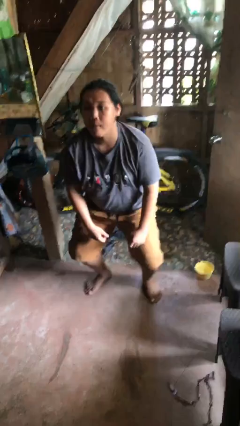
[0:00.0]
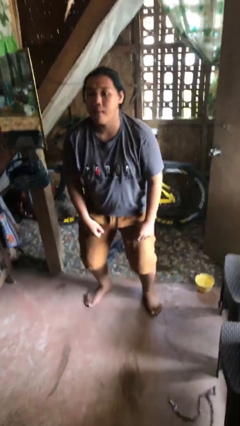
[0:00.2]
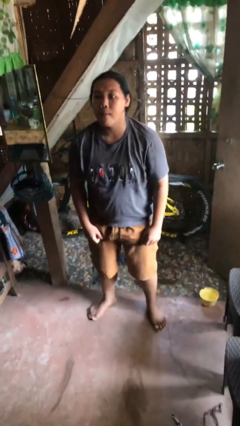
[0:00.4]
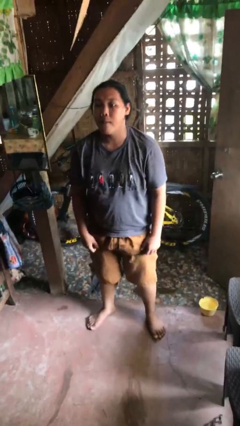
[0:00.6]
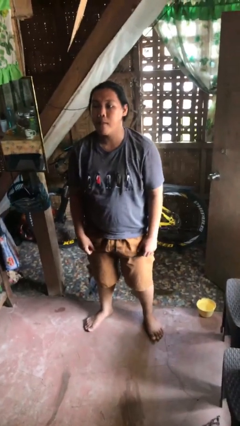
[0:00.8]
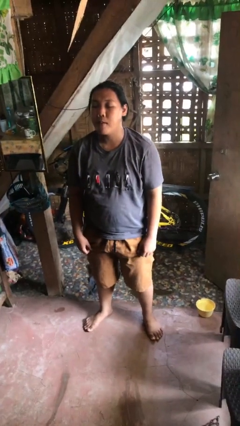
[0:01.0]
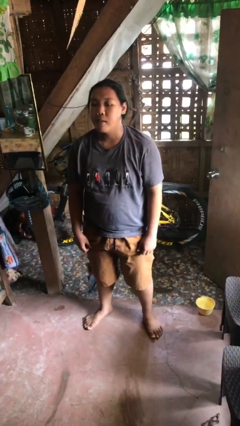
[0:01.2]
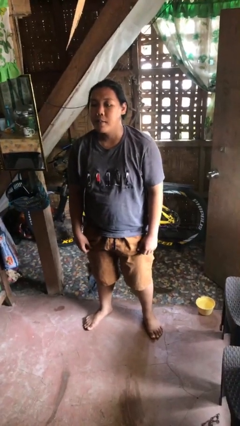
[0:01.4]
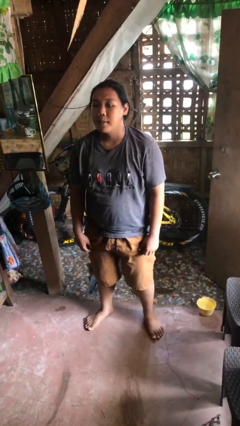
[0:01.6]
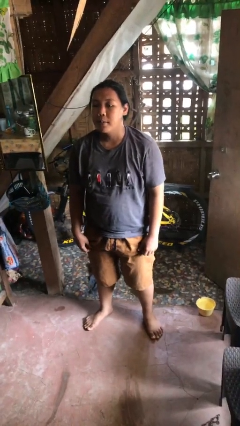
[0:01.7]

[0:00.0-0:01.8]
person stands up

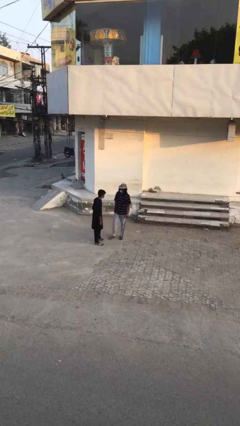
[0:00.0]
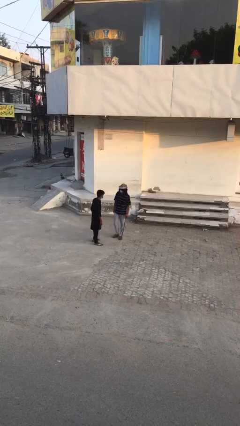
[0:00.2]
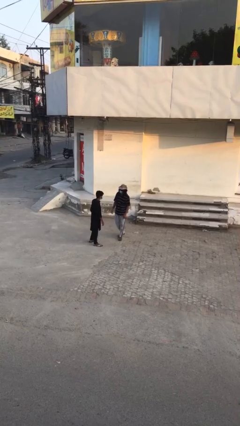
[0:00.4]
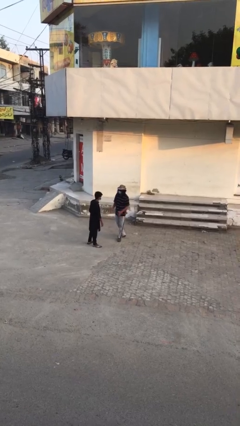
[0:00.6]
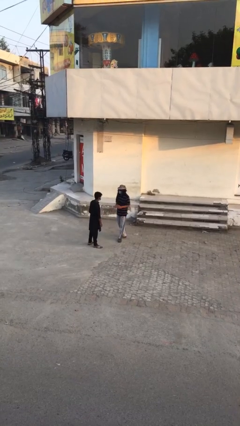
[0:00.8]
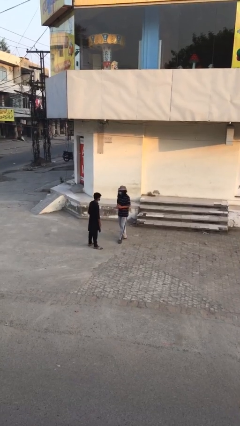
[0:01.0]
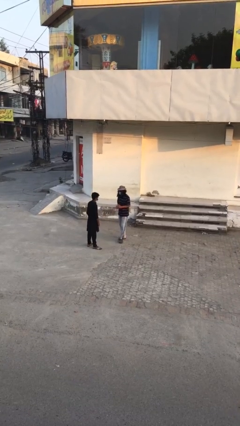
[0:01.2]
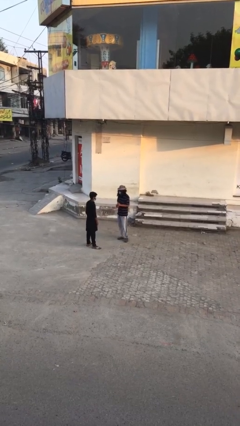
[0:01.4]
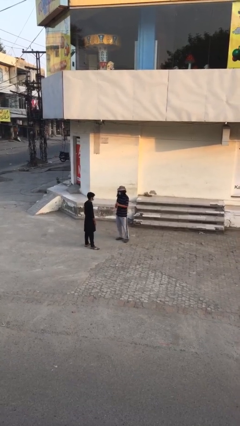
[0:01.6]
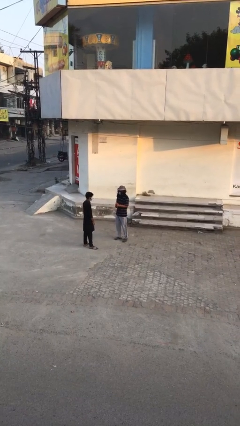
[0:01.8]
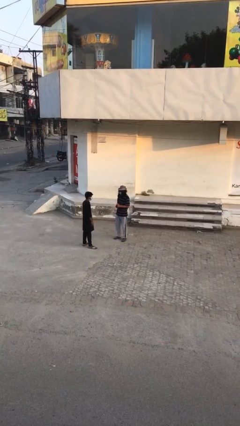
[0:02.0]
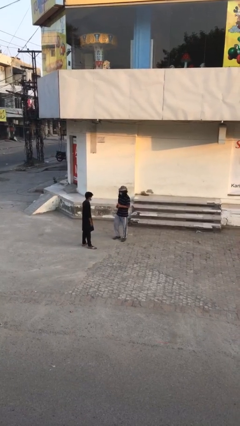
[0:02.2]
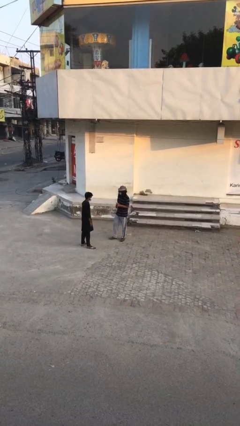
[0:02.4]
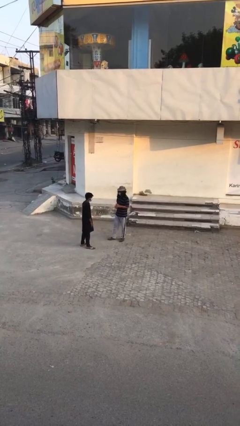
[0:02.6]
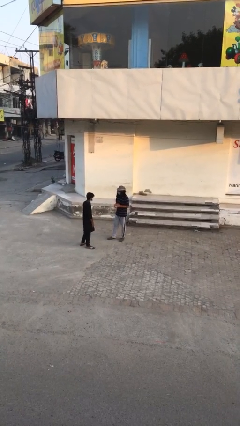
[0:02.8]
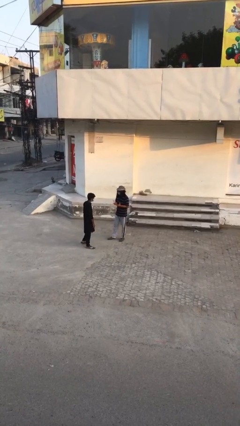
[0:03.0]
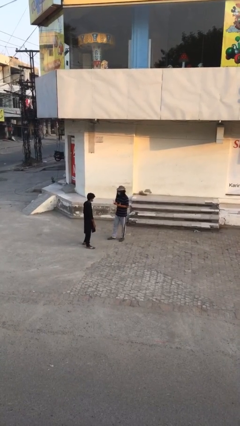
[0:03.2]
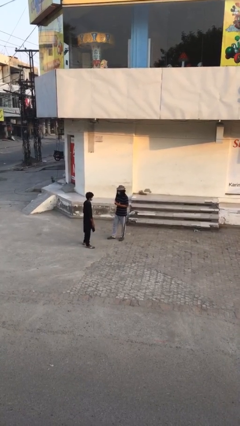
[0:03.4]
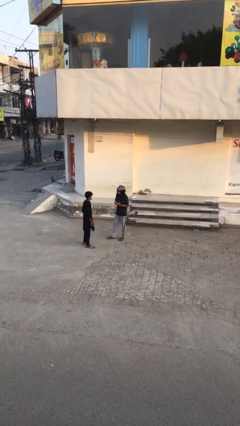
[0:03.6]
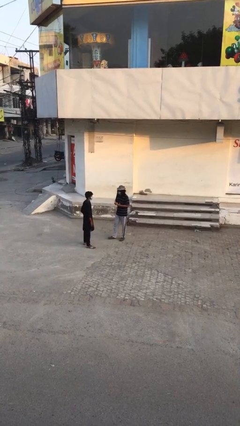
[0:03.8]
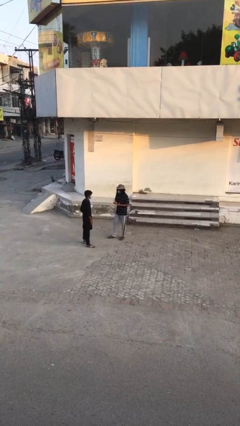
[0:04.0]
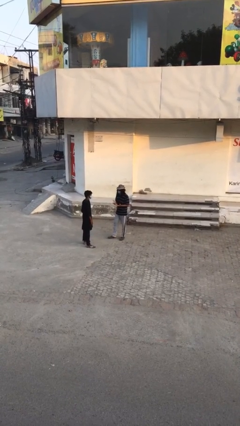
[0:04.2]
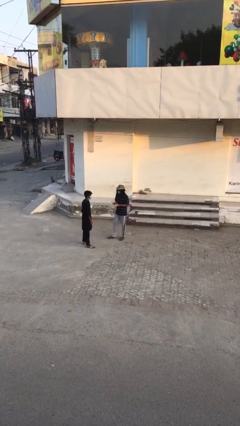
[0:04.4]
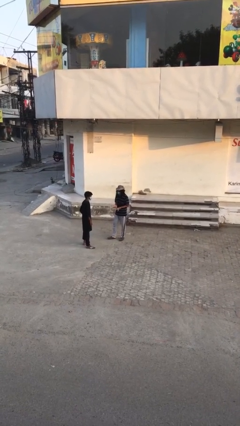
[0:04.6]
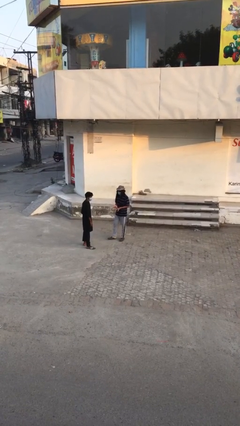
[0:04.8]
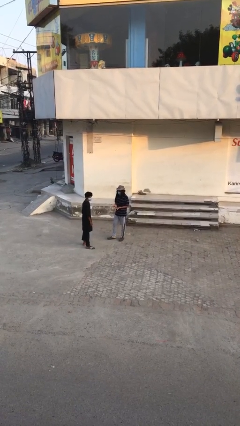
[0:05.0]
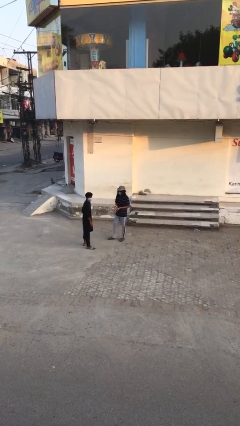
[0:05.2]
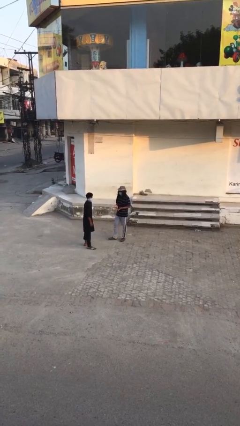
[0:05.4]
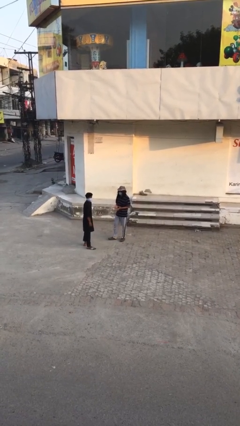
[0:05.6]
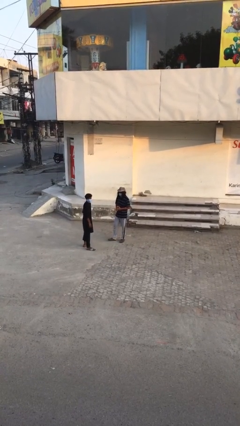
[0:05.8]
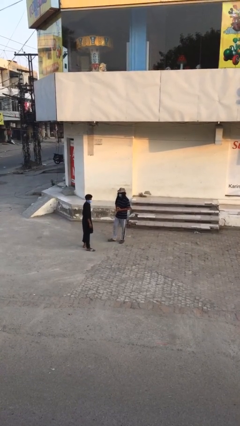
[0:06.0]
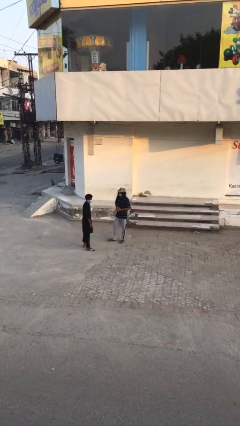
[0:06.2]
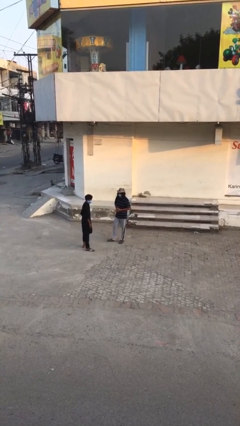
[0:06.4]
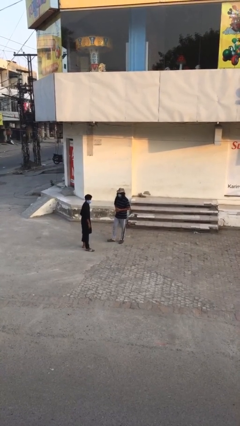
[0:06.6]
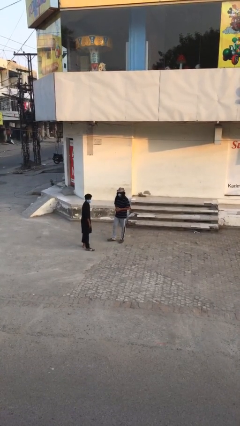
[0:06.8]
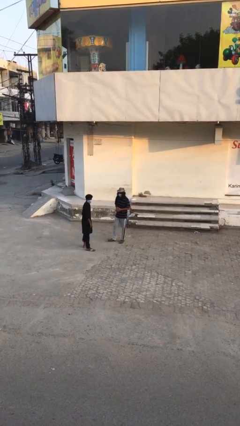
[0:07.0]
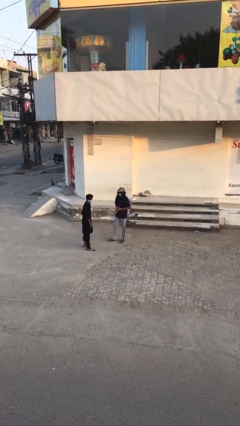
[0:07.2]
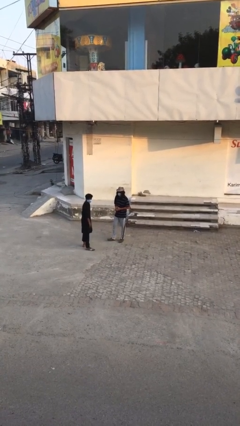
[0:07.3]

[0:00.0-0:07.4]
person talks to person

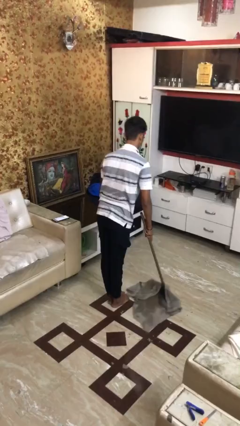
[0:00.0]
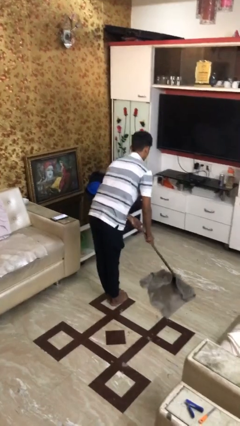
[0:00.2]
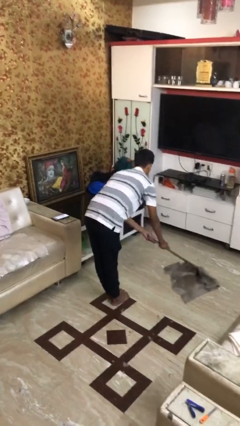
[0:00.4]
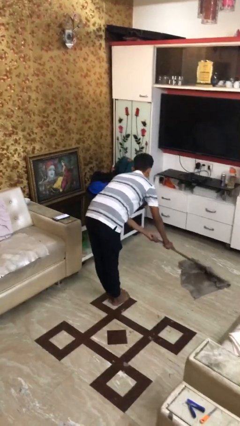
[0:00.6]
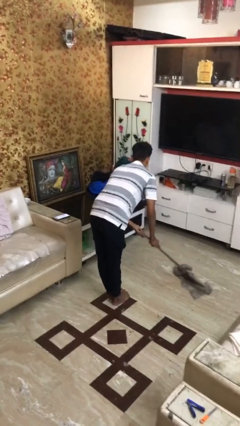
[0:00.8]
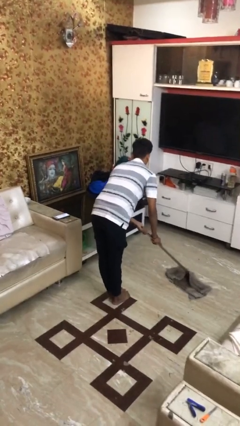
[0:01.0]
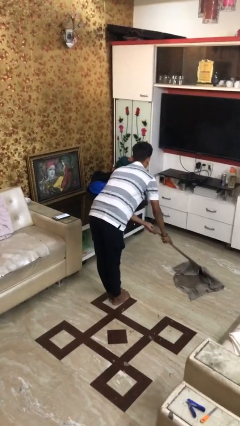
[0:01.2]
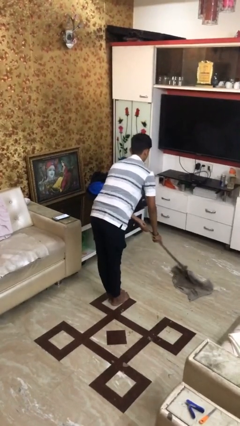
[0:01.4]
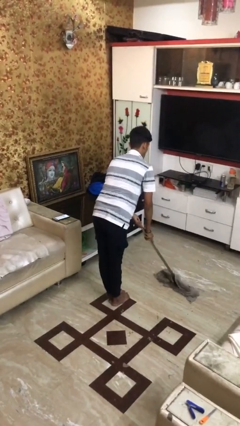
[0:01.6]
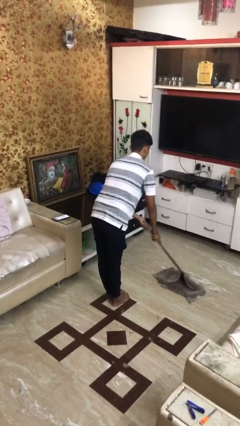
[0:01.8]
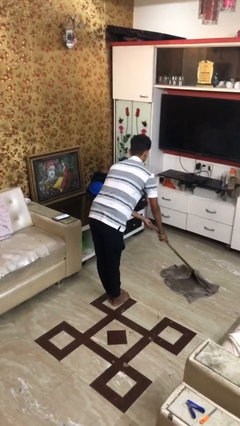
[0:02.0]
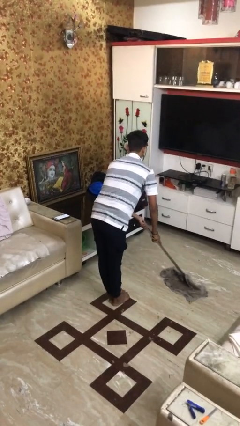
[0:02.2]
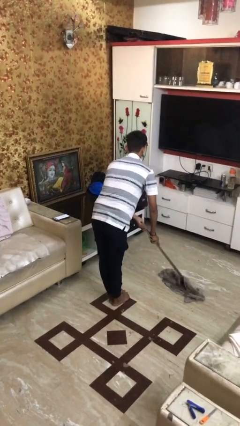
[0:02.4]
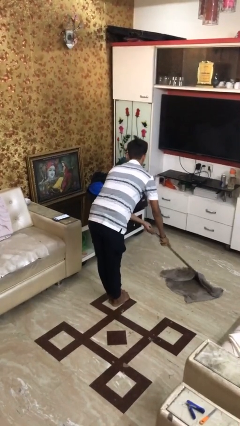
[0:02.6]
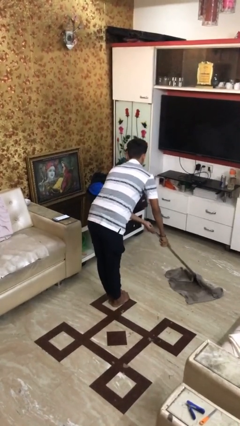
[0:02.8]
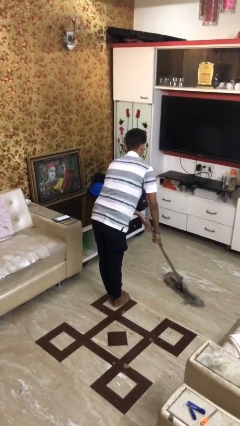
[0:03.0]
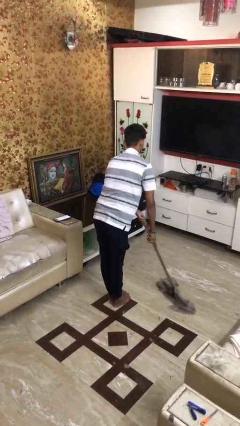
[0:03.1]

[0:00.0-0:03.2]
person mops

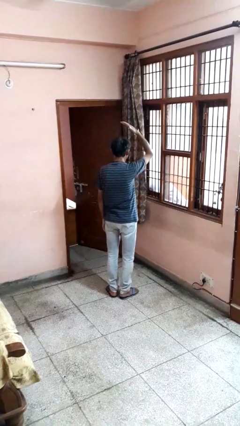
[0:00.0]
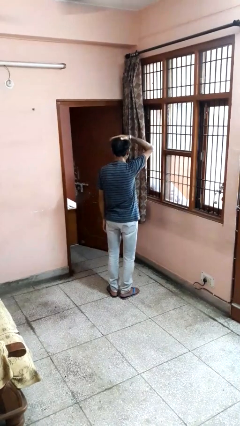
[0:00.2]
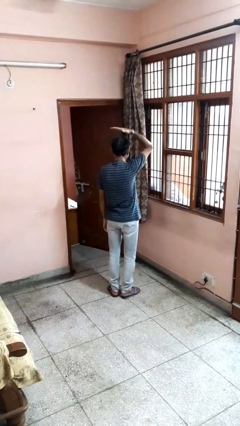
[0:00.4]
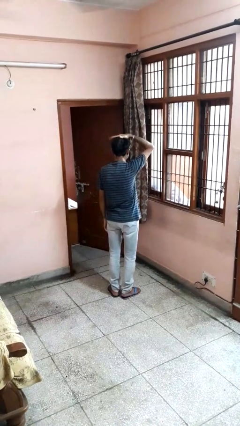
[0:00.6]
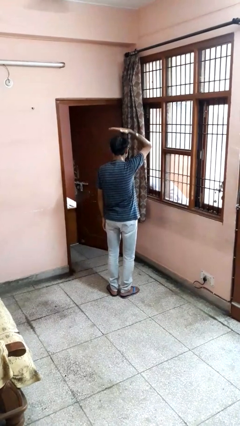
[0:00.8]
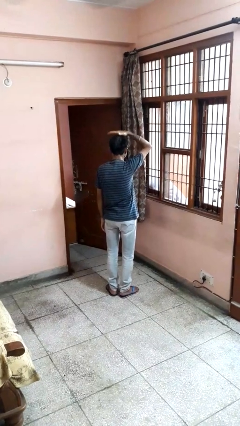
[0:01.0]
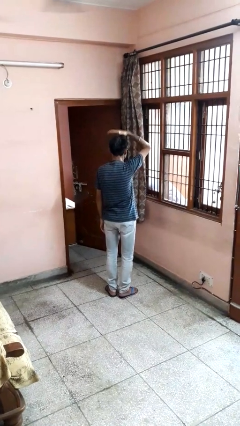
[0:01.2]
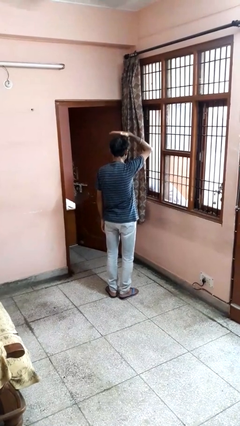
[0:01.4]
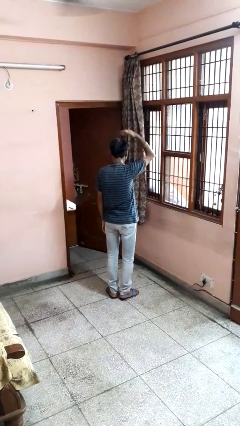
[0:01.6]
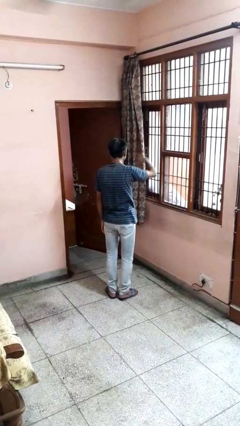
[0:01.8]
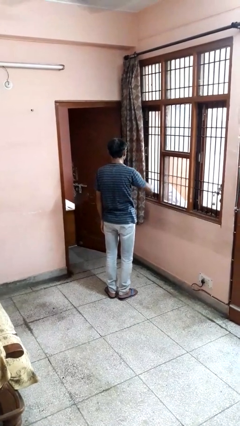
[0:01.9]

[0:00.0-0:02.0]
person pats head

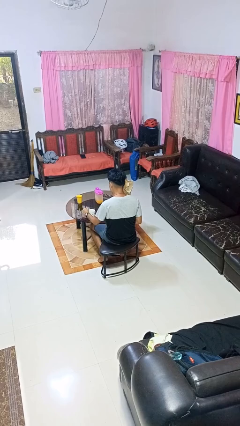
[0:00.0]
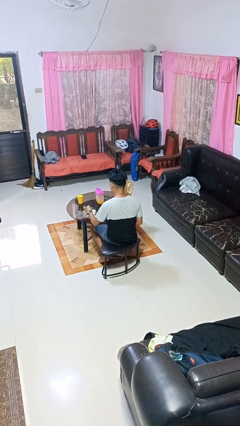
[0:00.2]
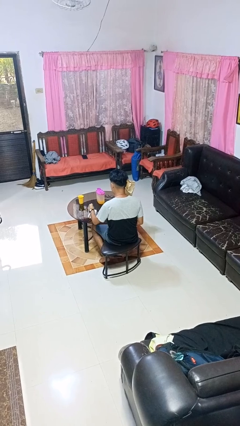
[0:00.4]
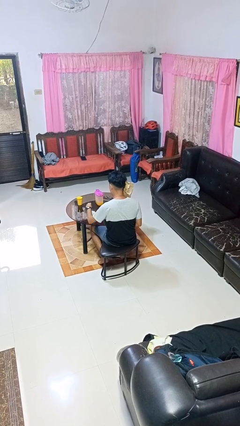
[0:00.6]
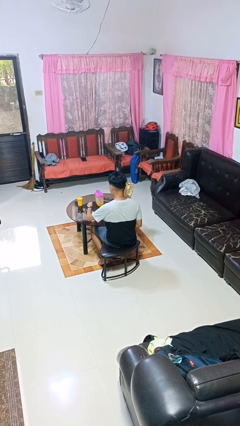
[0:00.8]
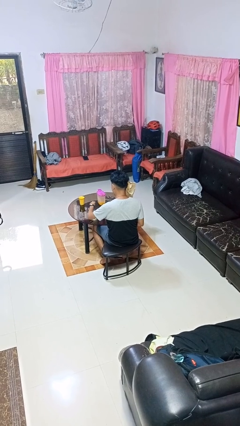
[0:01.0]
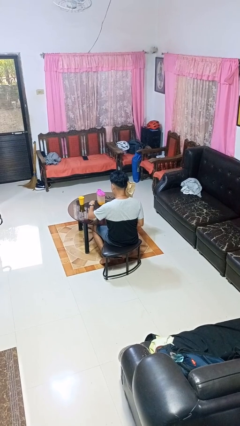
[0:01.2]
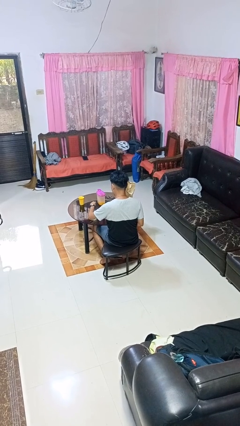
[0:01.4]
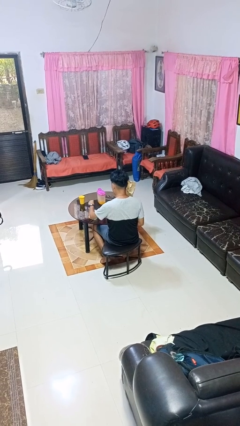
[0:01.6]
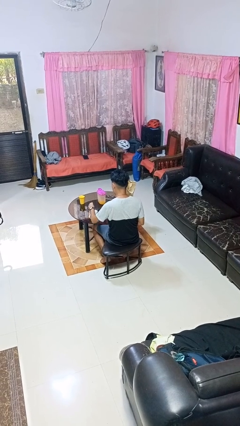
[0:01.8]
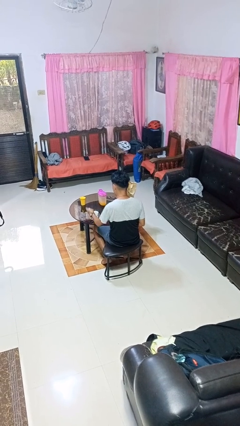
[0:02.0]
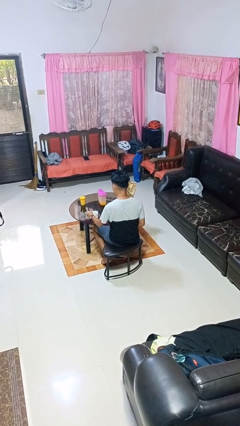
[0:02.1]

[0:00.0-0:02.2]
person stirs mug

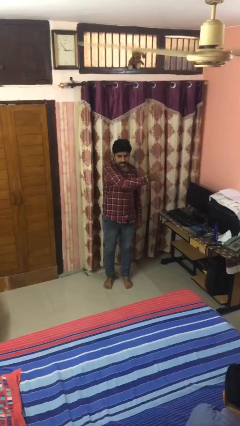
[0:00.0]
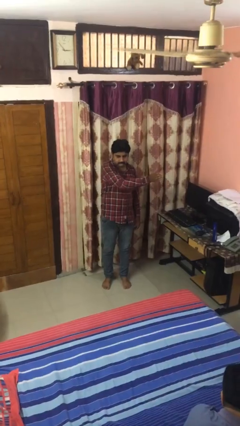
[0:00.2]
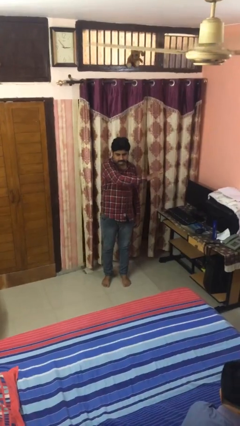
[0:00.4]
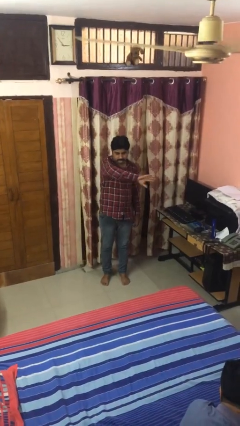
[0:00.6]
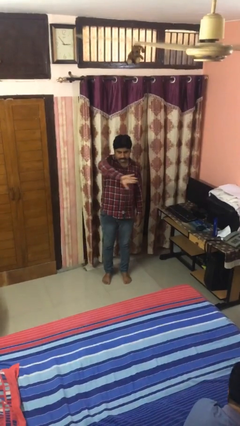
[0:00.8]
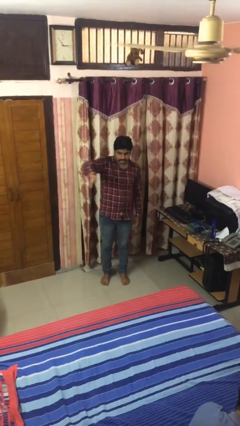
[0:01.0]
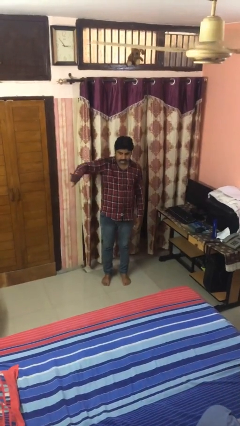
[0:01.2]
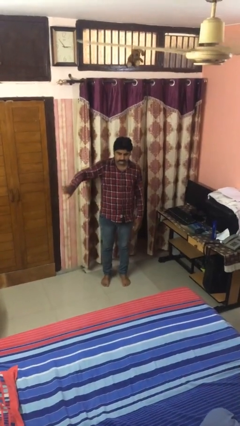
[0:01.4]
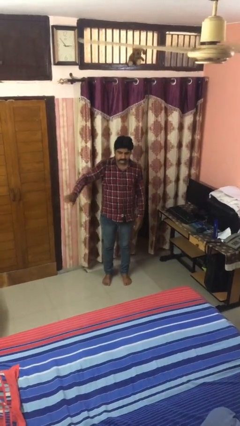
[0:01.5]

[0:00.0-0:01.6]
person gestures swipe right
